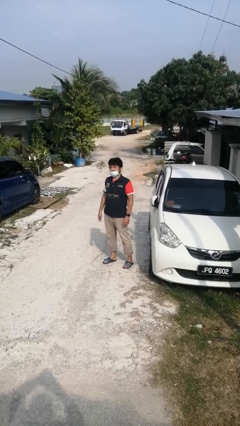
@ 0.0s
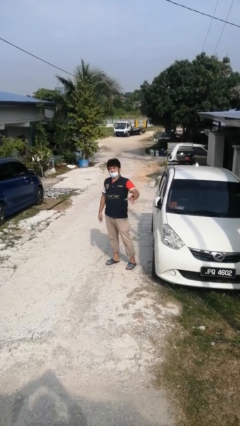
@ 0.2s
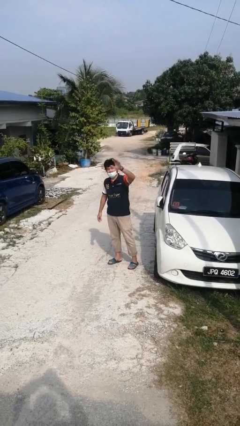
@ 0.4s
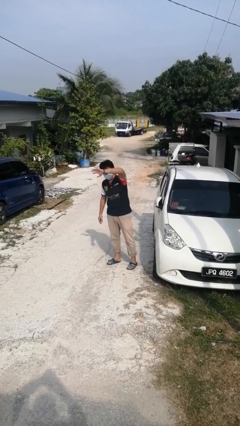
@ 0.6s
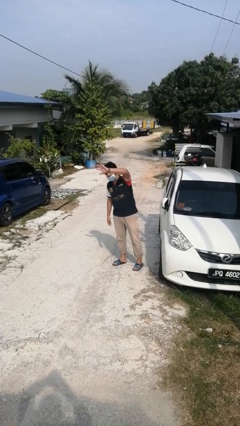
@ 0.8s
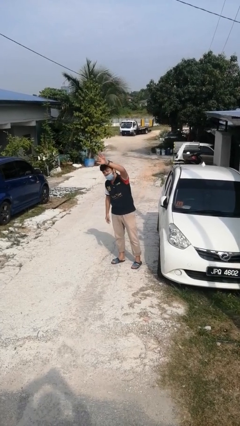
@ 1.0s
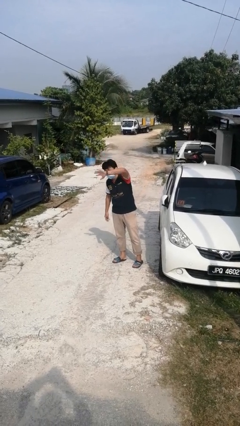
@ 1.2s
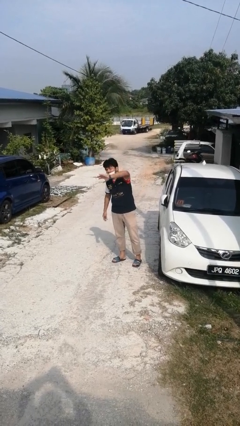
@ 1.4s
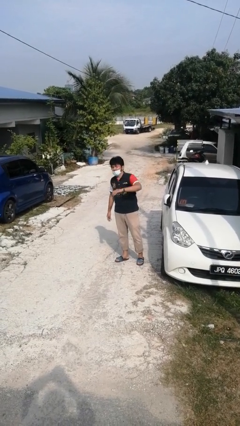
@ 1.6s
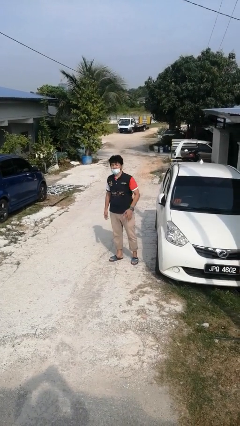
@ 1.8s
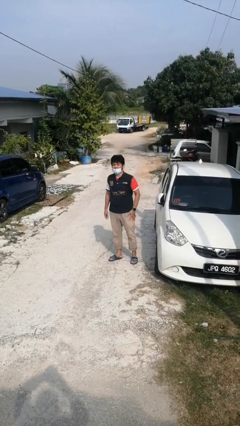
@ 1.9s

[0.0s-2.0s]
person waves at person

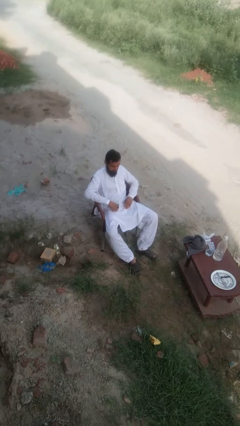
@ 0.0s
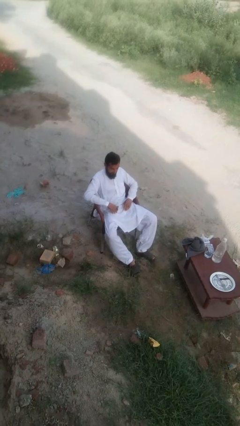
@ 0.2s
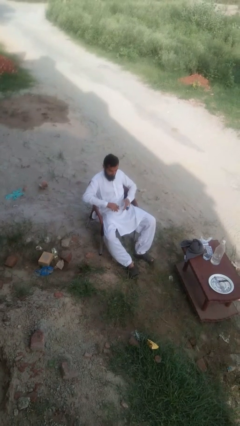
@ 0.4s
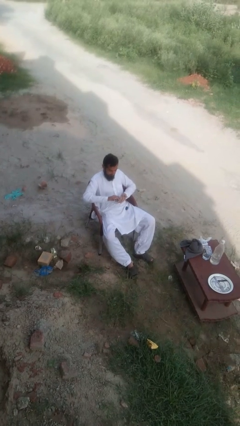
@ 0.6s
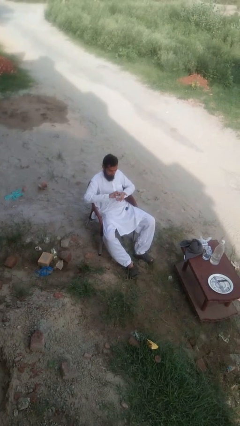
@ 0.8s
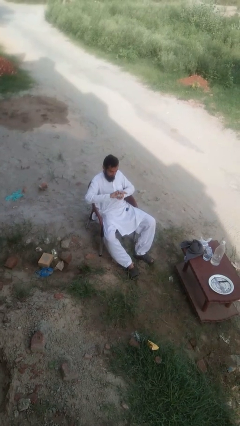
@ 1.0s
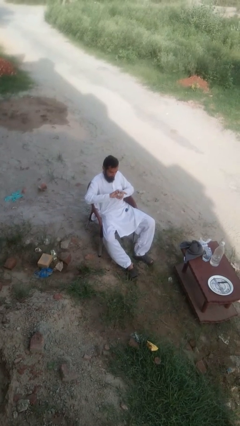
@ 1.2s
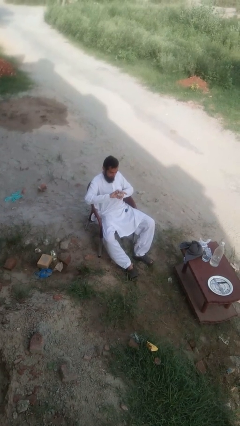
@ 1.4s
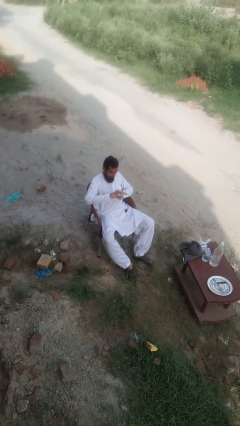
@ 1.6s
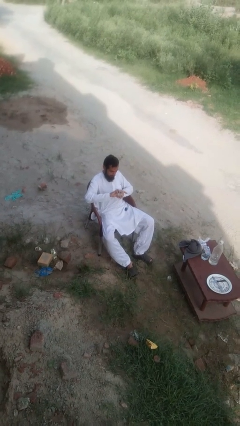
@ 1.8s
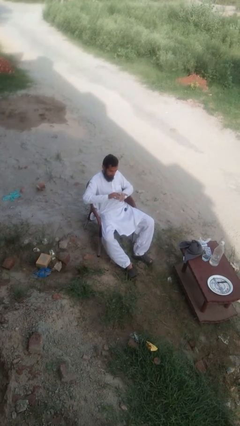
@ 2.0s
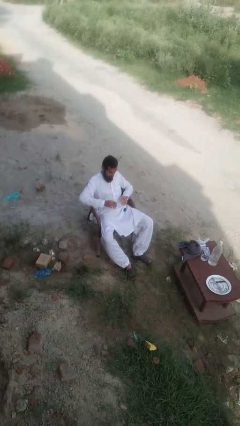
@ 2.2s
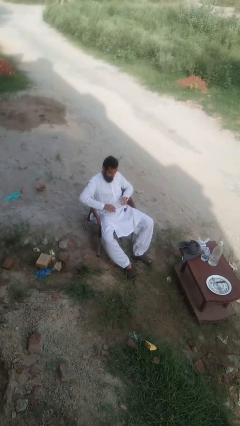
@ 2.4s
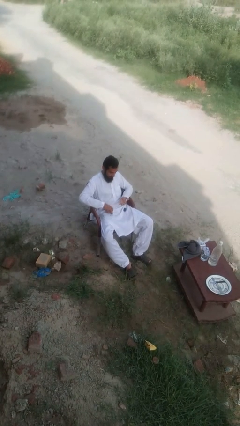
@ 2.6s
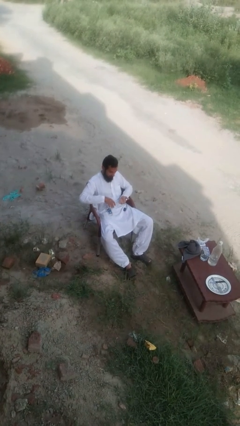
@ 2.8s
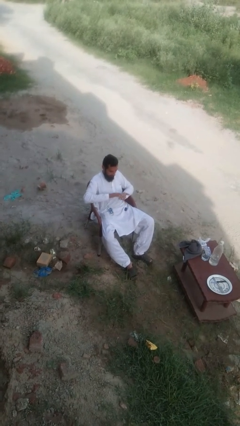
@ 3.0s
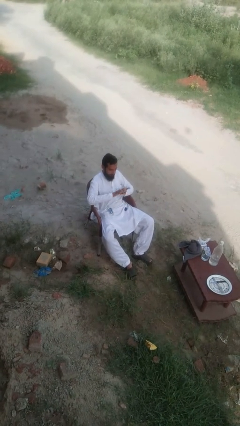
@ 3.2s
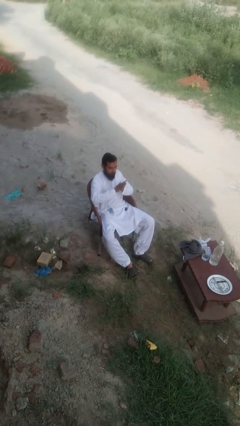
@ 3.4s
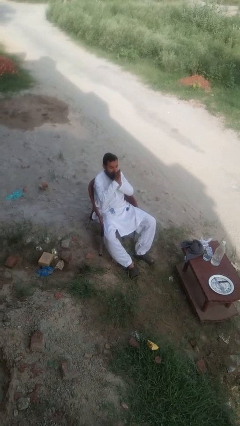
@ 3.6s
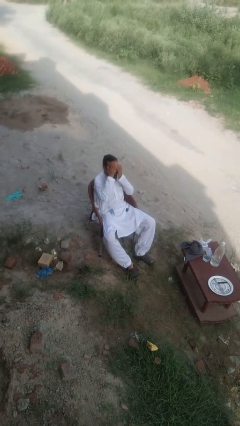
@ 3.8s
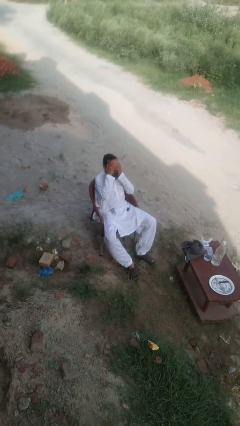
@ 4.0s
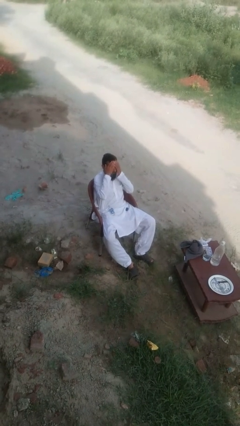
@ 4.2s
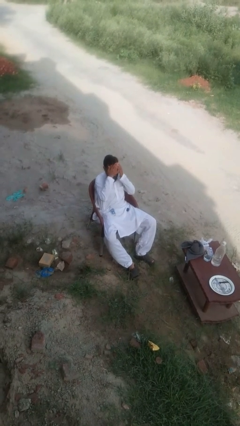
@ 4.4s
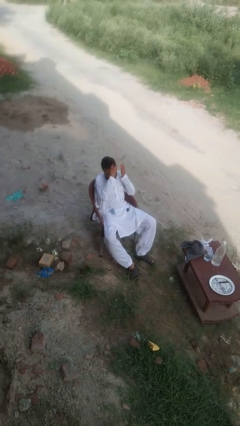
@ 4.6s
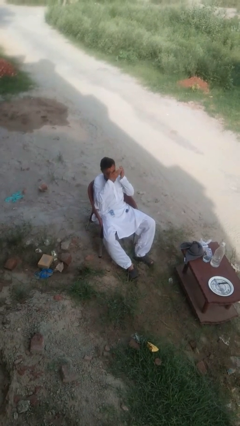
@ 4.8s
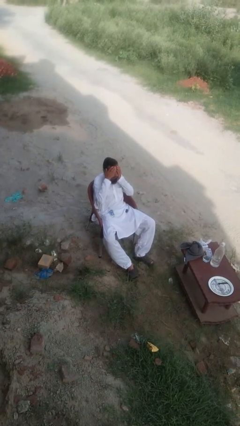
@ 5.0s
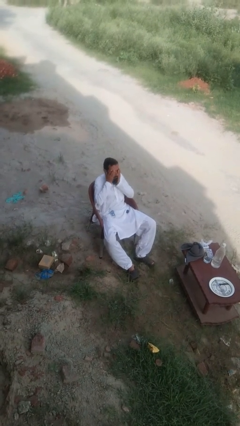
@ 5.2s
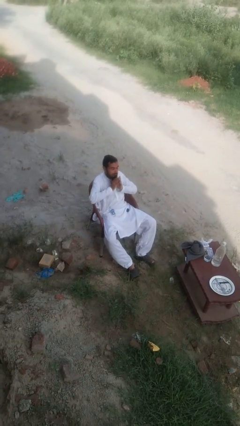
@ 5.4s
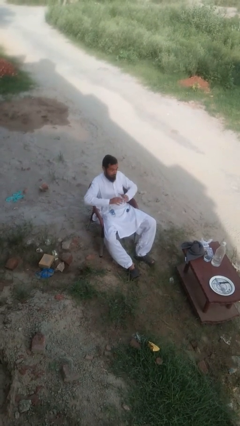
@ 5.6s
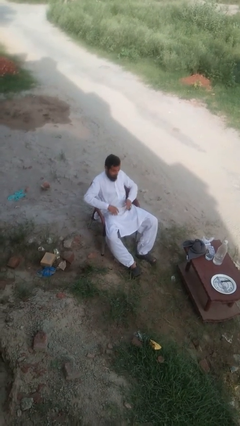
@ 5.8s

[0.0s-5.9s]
person applies facial moisturizer

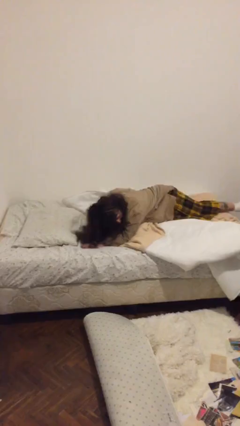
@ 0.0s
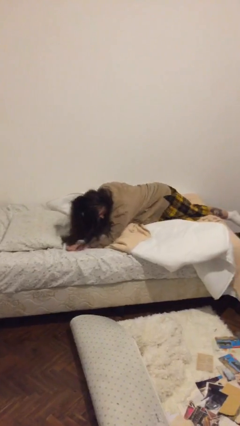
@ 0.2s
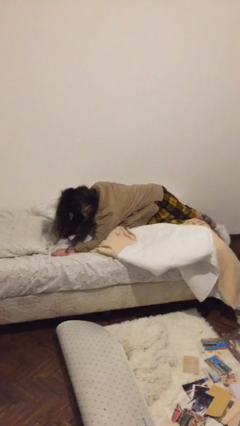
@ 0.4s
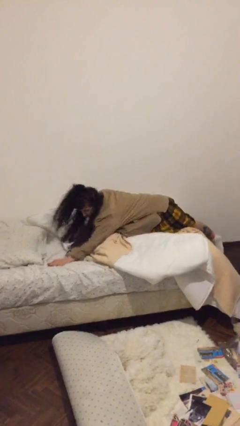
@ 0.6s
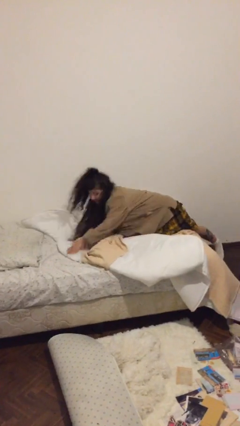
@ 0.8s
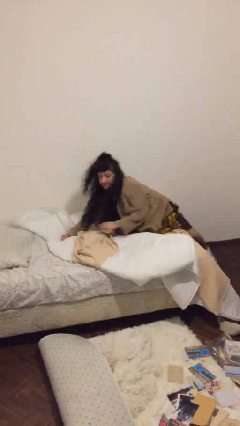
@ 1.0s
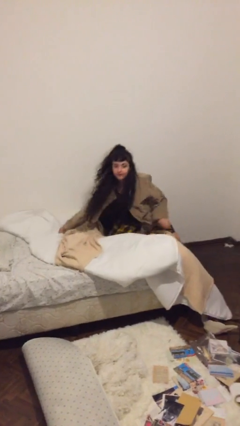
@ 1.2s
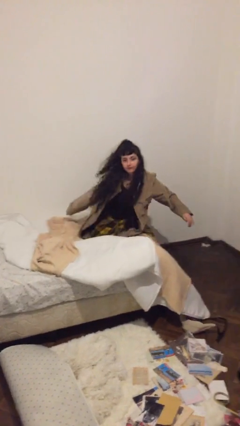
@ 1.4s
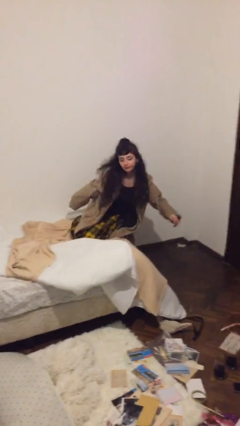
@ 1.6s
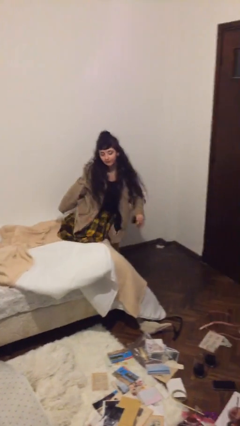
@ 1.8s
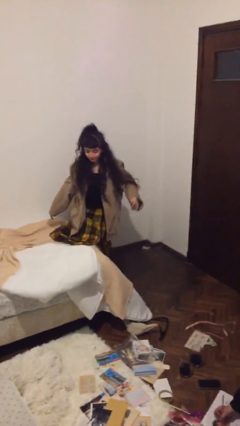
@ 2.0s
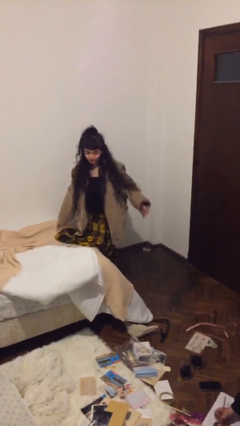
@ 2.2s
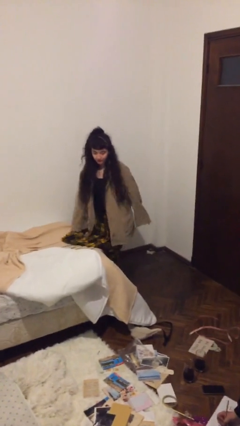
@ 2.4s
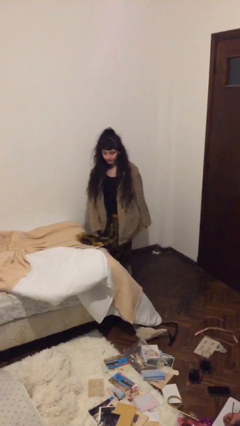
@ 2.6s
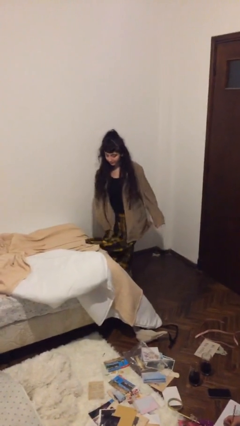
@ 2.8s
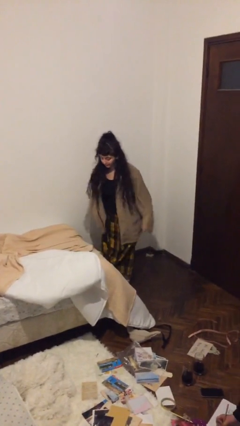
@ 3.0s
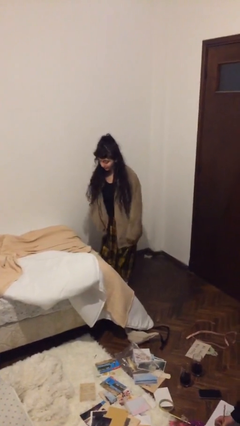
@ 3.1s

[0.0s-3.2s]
person stands up

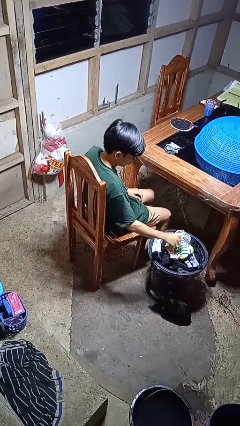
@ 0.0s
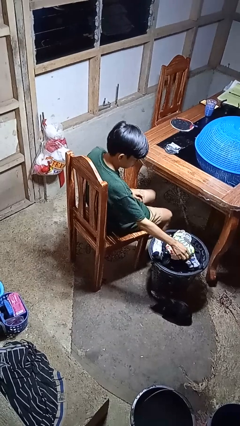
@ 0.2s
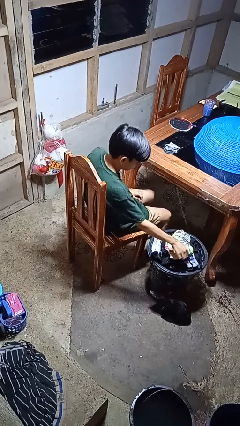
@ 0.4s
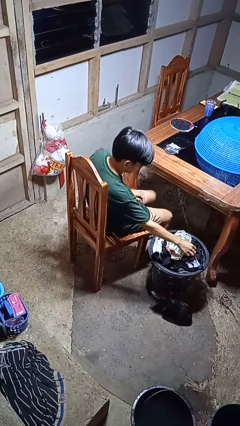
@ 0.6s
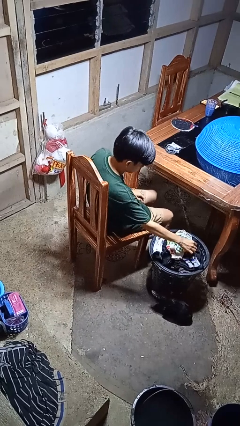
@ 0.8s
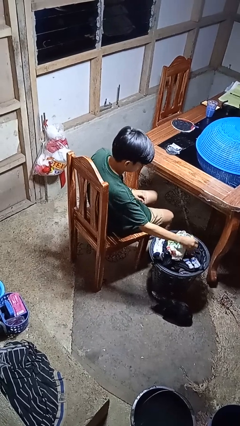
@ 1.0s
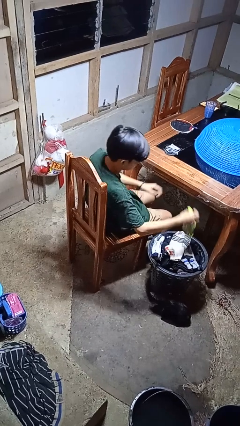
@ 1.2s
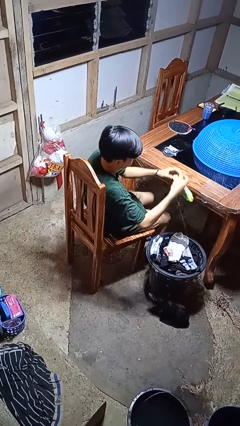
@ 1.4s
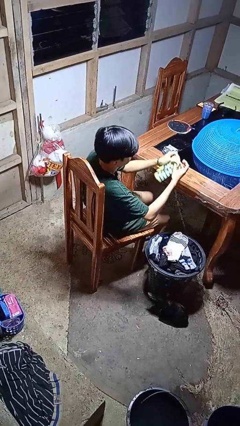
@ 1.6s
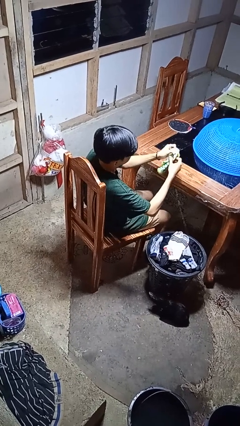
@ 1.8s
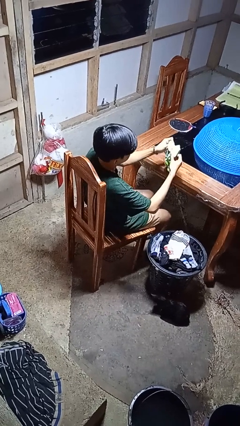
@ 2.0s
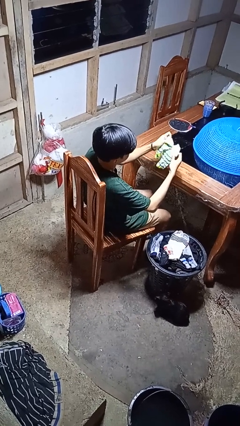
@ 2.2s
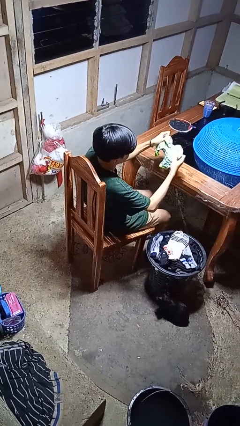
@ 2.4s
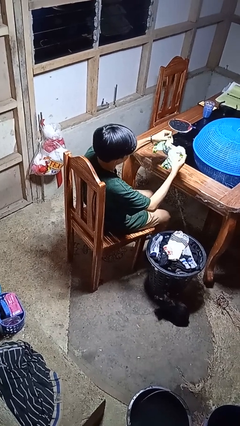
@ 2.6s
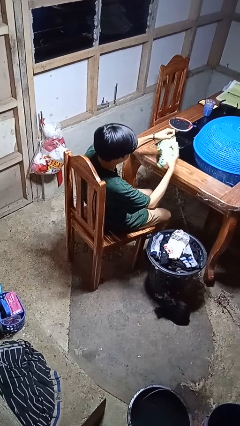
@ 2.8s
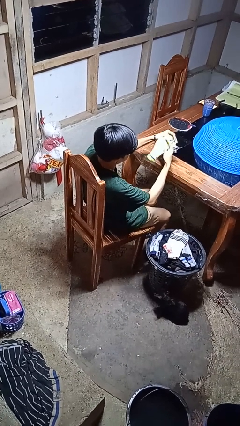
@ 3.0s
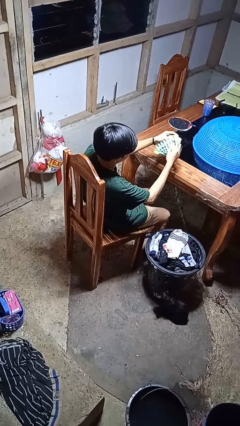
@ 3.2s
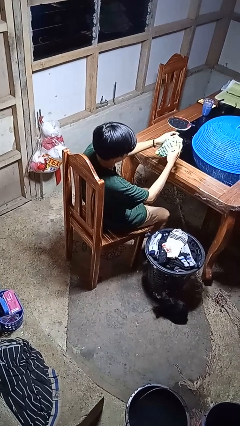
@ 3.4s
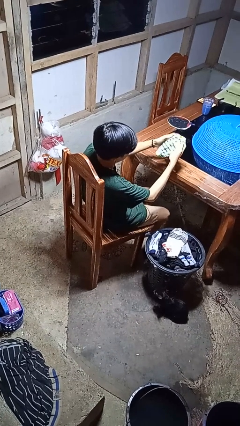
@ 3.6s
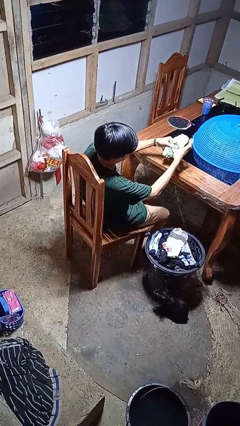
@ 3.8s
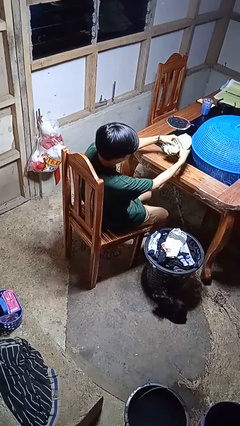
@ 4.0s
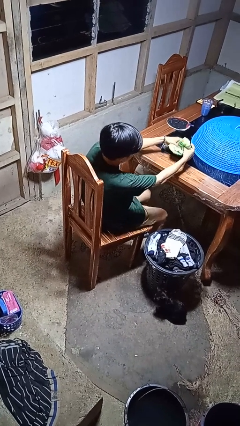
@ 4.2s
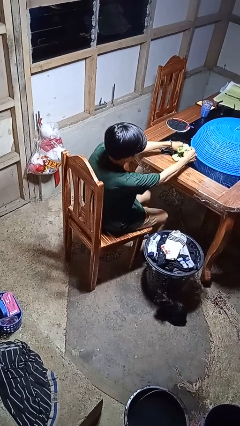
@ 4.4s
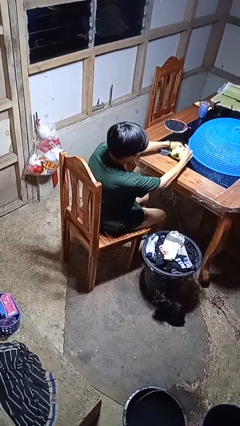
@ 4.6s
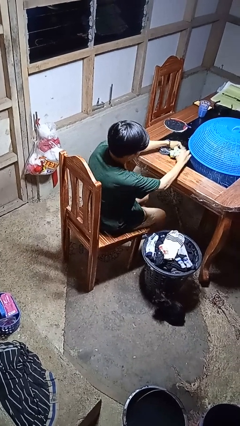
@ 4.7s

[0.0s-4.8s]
person folds socks

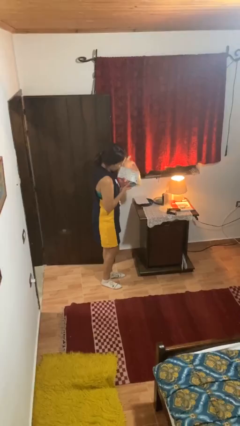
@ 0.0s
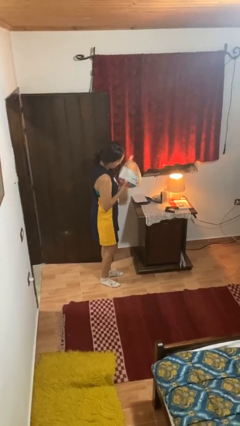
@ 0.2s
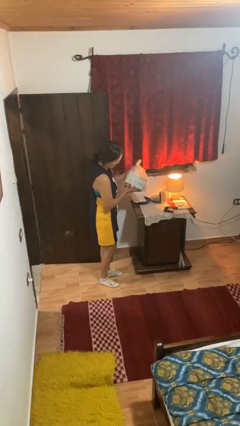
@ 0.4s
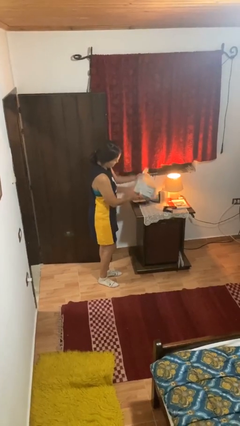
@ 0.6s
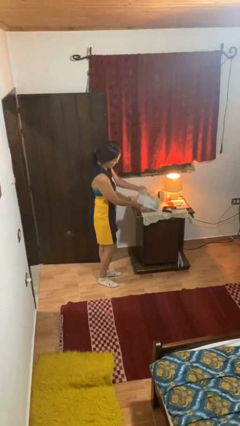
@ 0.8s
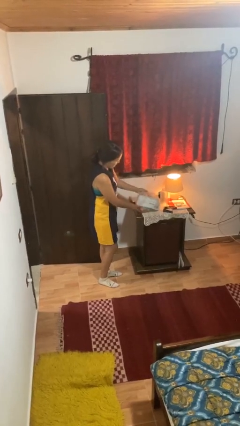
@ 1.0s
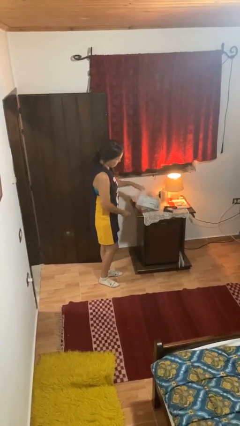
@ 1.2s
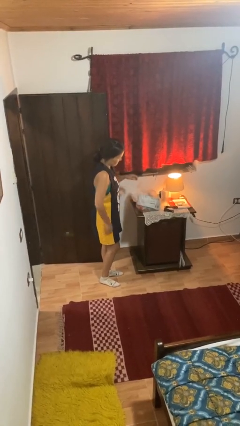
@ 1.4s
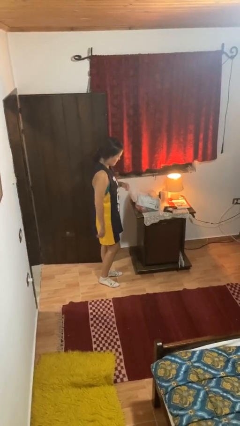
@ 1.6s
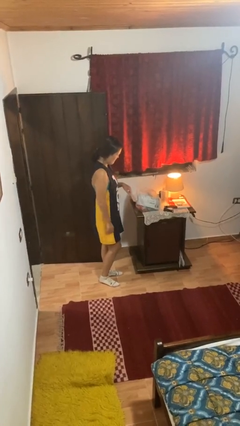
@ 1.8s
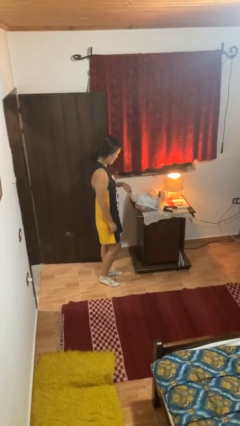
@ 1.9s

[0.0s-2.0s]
person puts down object on countertop
